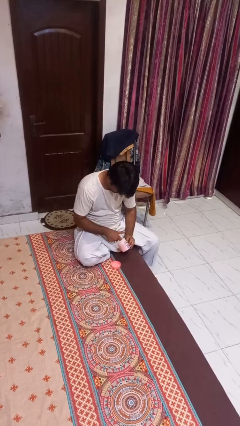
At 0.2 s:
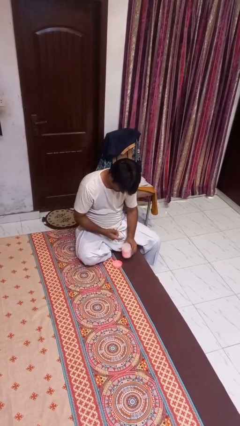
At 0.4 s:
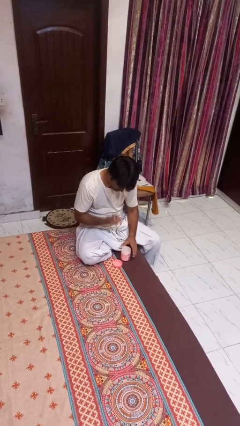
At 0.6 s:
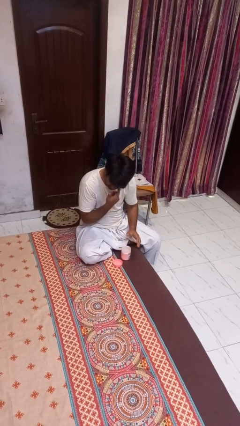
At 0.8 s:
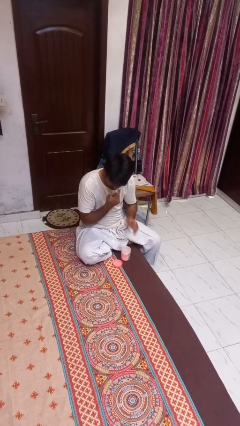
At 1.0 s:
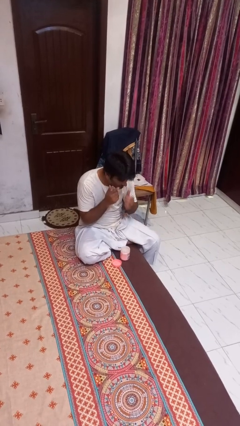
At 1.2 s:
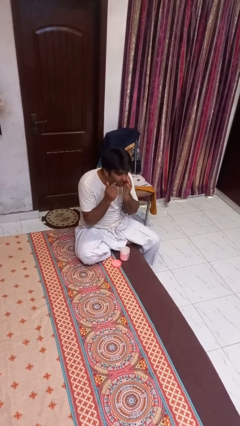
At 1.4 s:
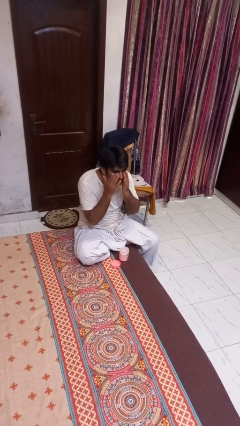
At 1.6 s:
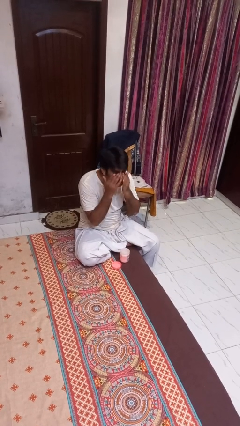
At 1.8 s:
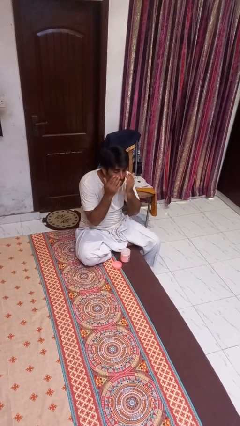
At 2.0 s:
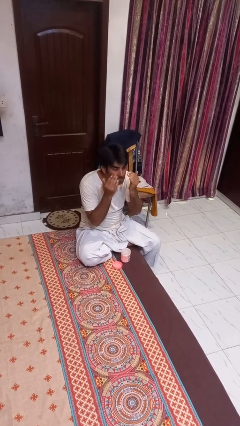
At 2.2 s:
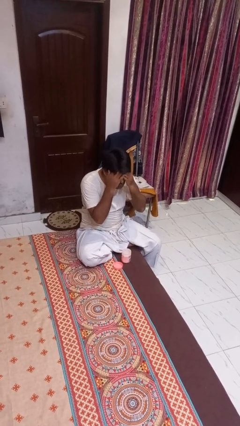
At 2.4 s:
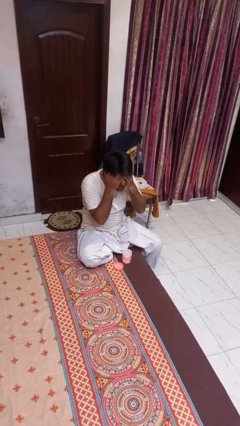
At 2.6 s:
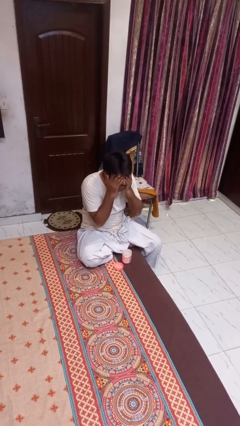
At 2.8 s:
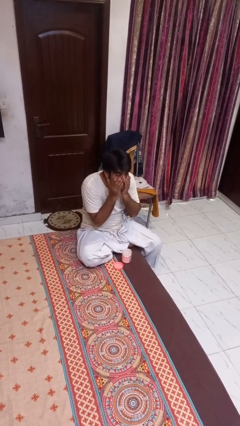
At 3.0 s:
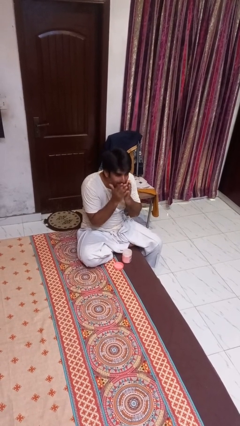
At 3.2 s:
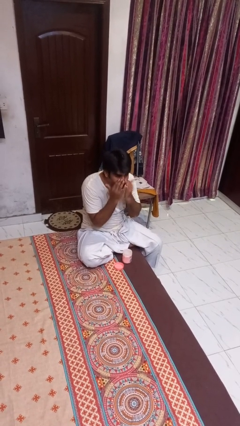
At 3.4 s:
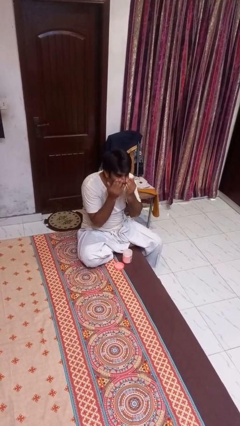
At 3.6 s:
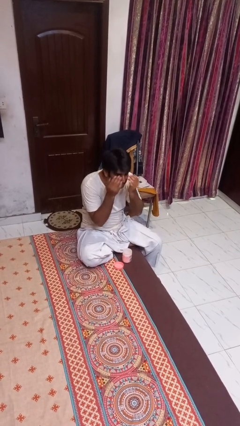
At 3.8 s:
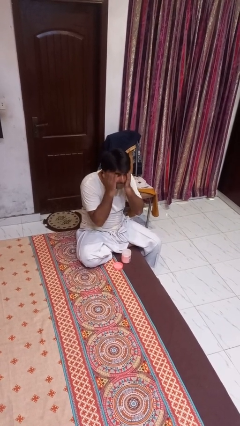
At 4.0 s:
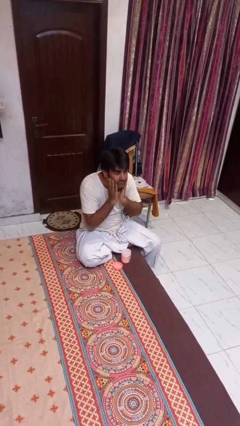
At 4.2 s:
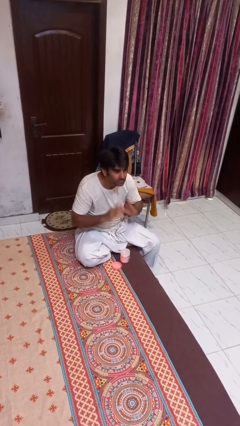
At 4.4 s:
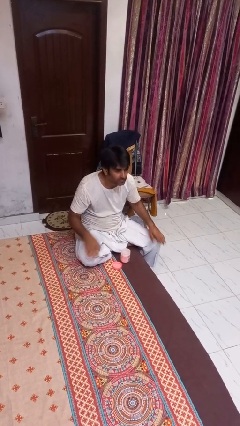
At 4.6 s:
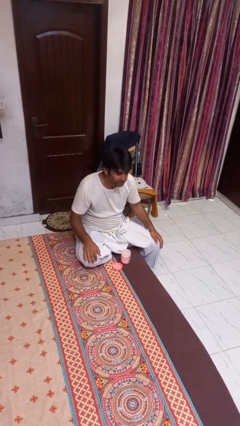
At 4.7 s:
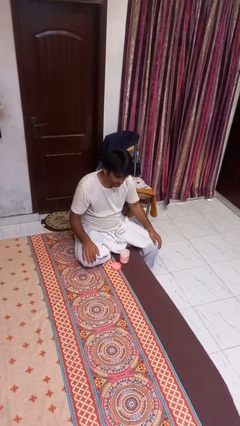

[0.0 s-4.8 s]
person applies facial moisturizer

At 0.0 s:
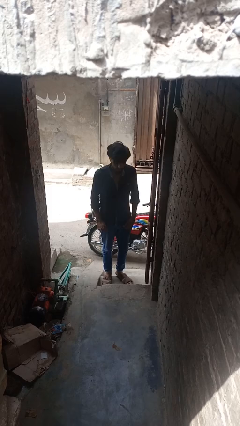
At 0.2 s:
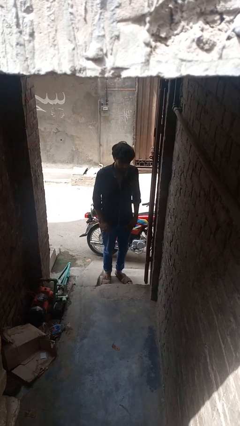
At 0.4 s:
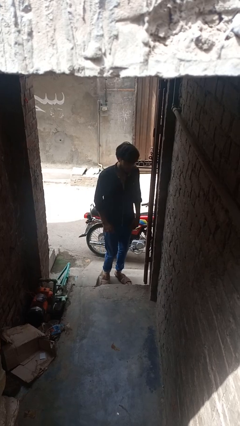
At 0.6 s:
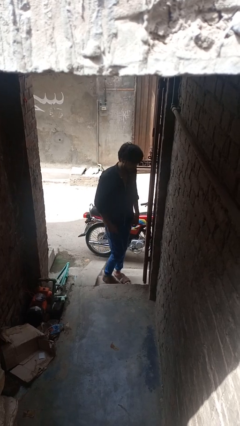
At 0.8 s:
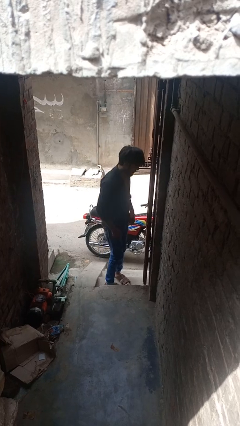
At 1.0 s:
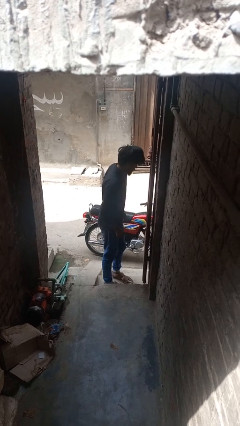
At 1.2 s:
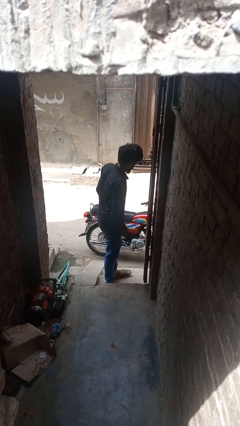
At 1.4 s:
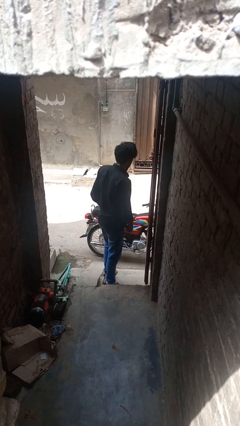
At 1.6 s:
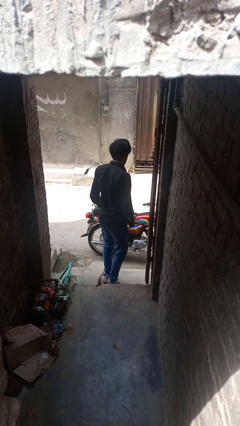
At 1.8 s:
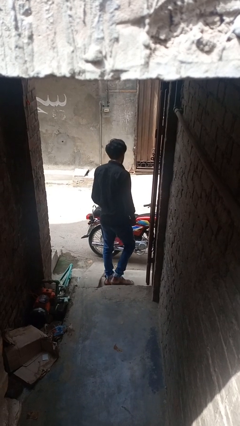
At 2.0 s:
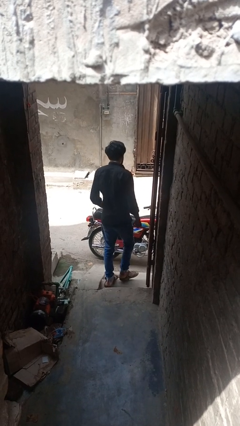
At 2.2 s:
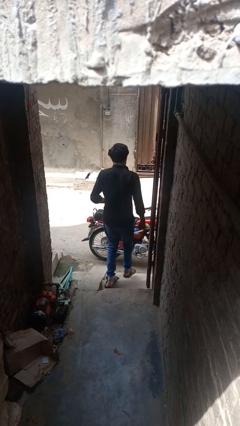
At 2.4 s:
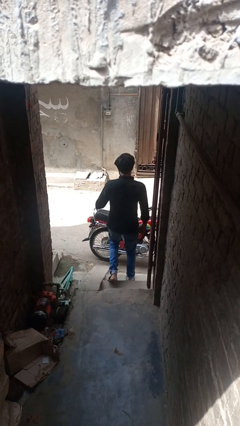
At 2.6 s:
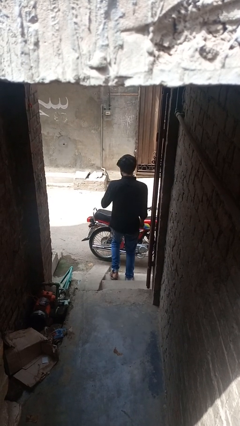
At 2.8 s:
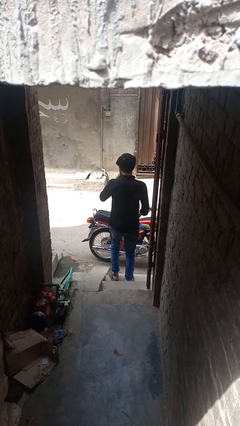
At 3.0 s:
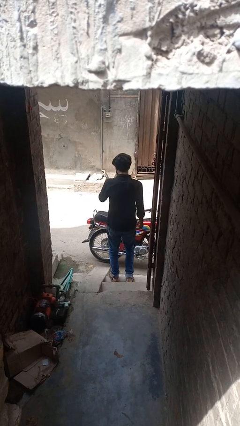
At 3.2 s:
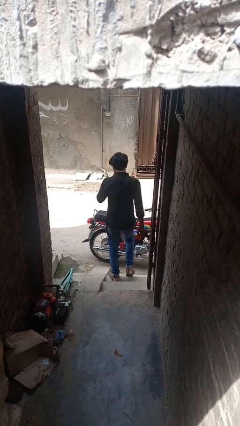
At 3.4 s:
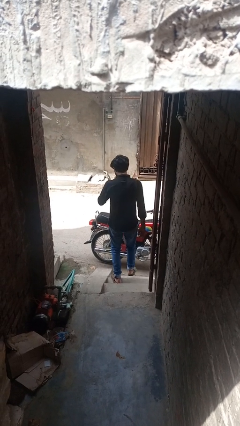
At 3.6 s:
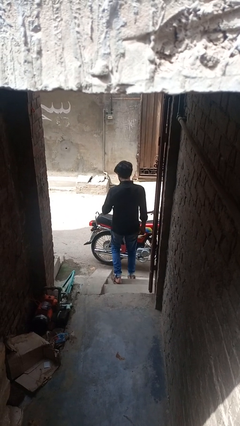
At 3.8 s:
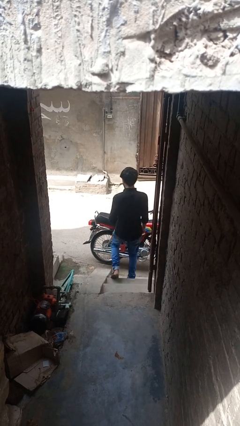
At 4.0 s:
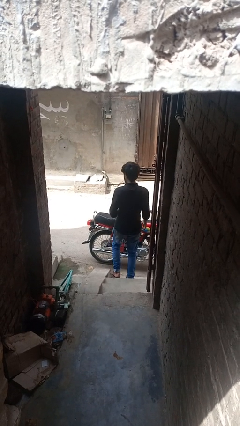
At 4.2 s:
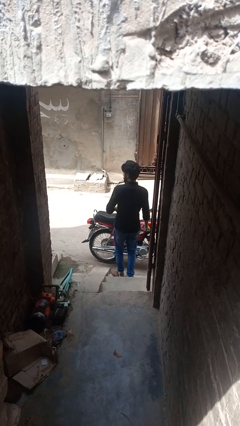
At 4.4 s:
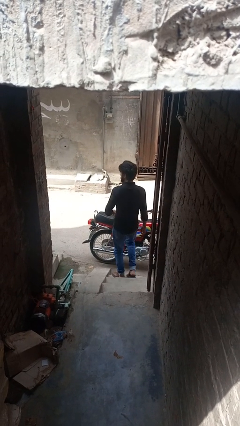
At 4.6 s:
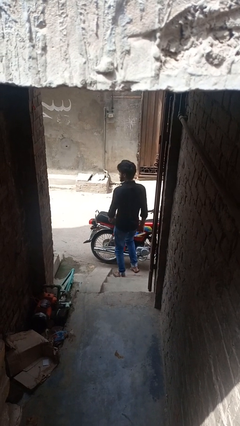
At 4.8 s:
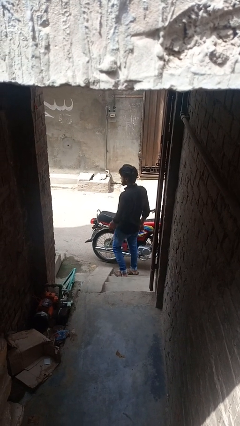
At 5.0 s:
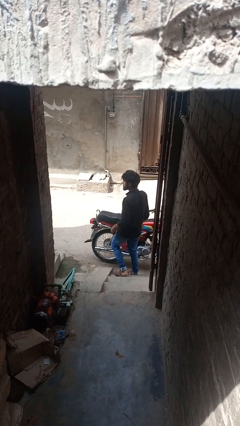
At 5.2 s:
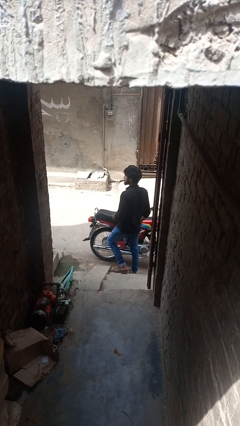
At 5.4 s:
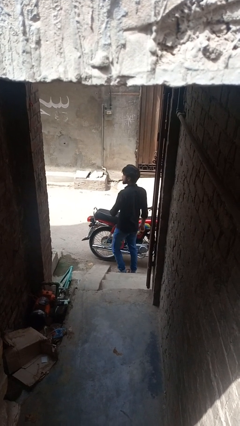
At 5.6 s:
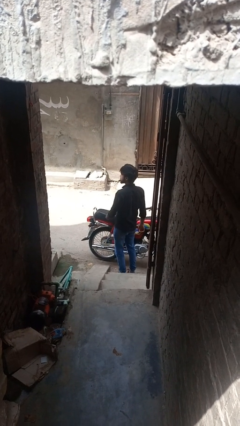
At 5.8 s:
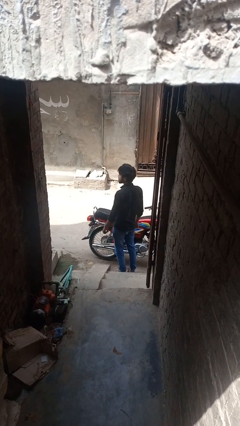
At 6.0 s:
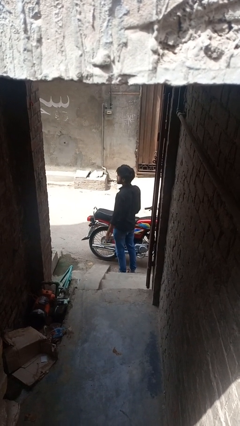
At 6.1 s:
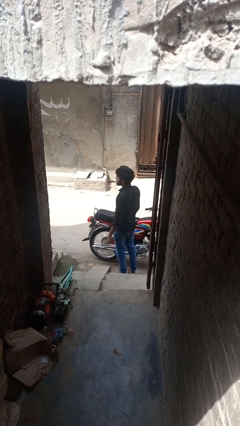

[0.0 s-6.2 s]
person climbs down stairs

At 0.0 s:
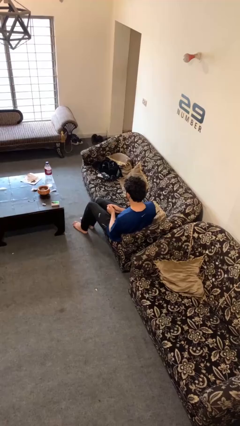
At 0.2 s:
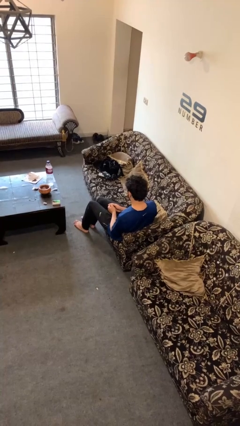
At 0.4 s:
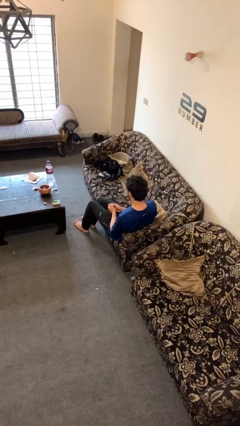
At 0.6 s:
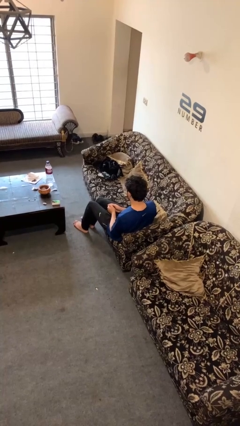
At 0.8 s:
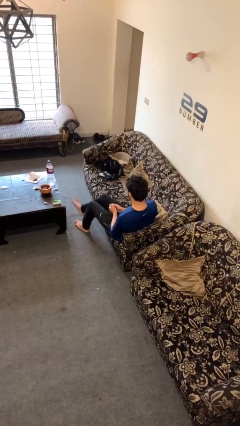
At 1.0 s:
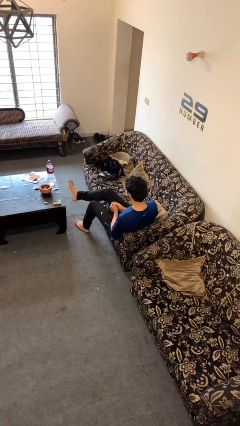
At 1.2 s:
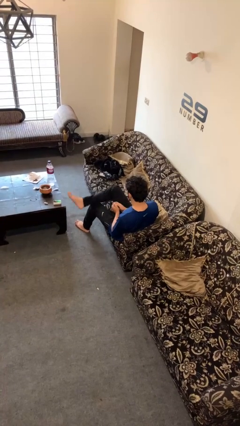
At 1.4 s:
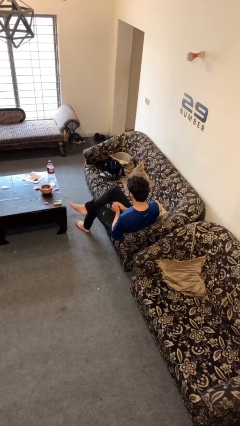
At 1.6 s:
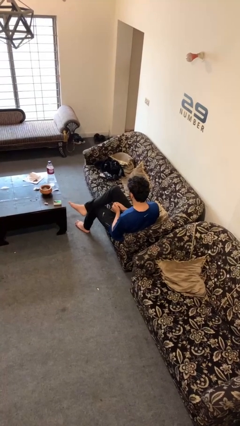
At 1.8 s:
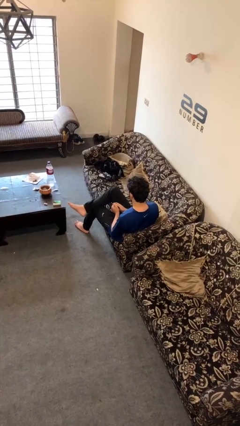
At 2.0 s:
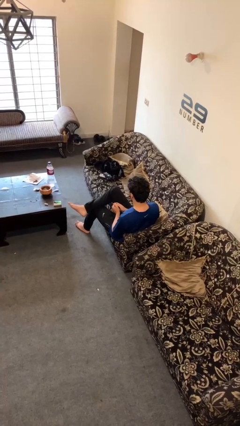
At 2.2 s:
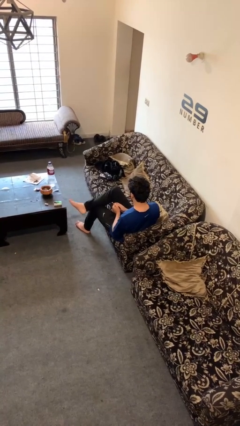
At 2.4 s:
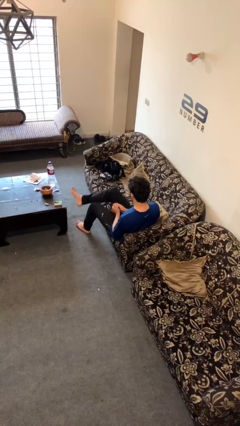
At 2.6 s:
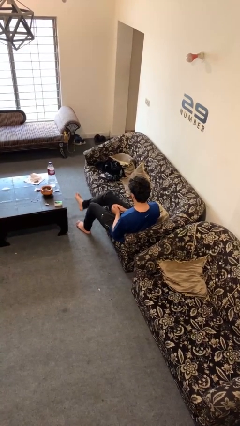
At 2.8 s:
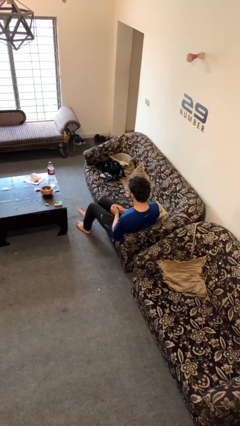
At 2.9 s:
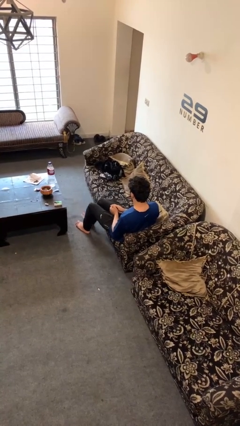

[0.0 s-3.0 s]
person crosses legs

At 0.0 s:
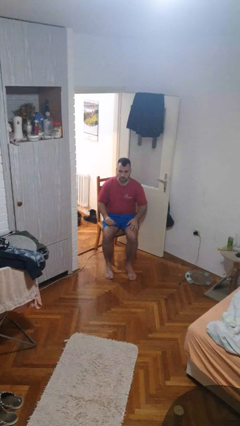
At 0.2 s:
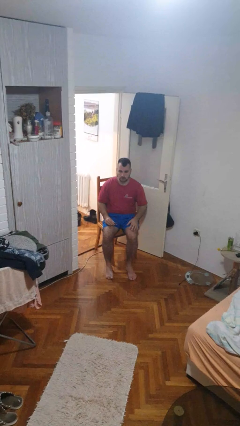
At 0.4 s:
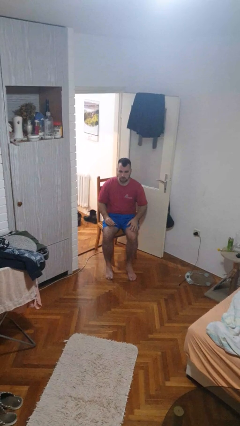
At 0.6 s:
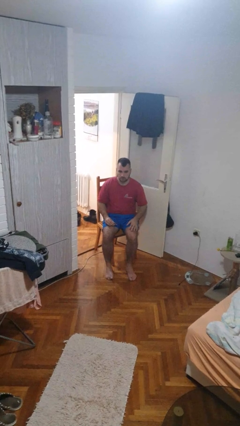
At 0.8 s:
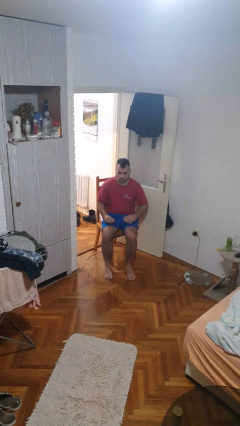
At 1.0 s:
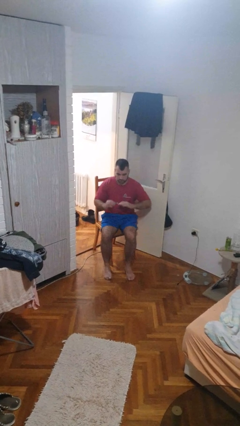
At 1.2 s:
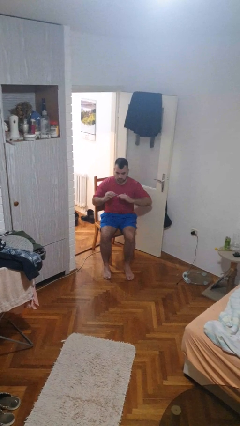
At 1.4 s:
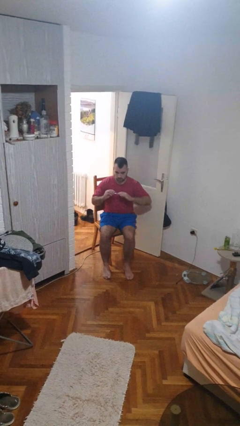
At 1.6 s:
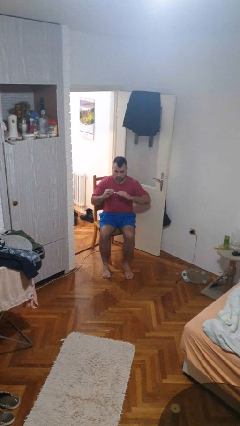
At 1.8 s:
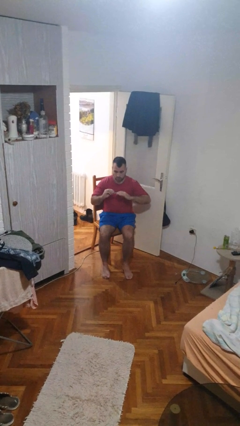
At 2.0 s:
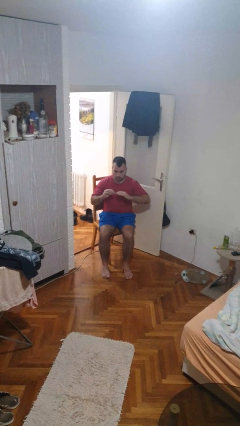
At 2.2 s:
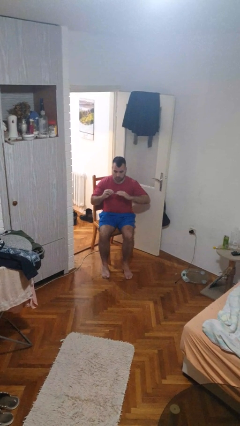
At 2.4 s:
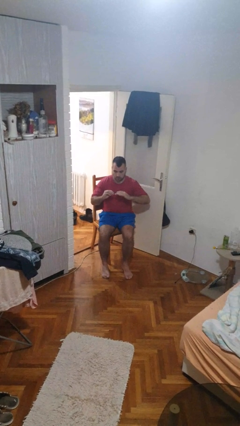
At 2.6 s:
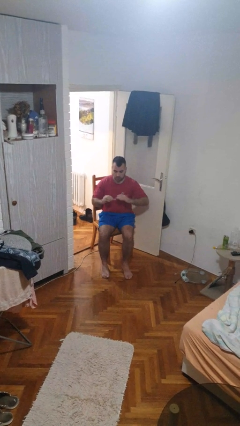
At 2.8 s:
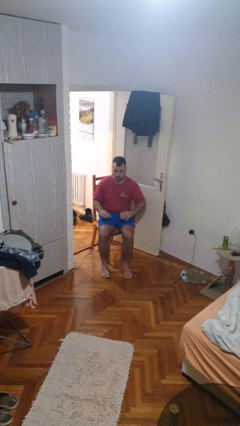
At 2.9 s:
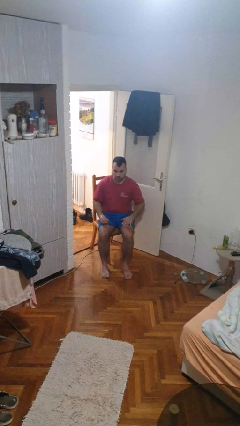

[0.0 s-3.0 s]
person clips fingernails

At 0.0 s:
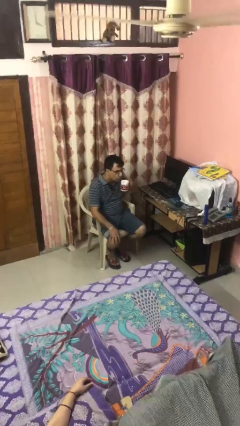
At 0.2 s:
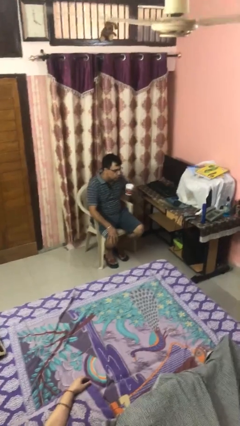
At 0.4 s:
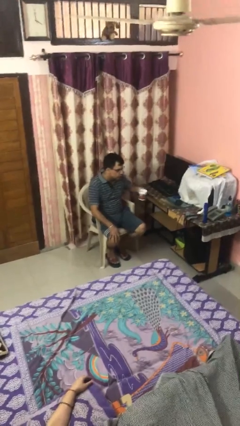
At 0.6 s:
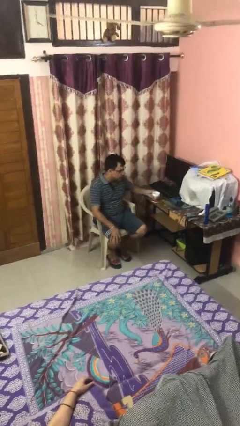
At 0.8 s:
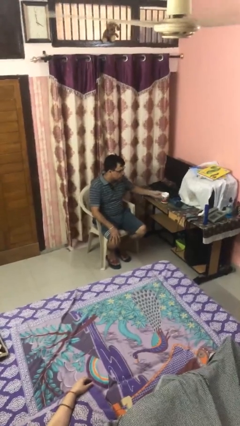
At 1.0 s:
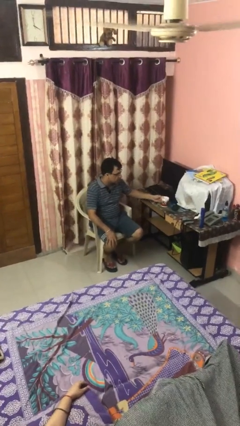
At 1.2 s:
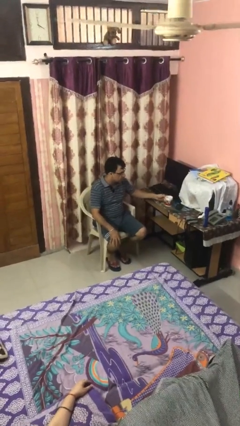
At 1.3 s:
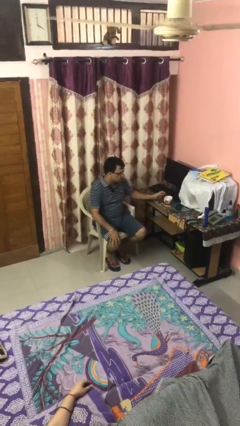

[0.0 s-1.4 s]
person puts down object on table
